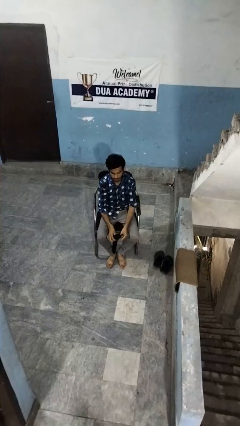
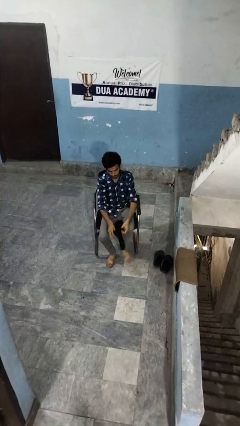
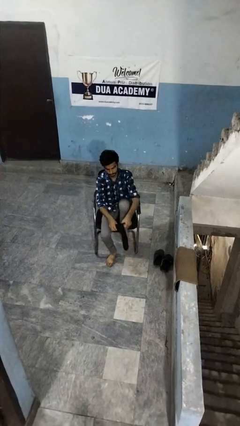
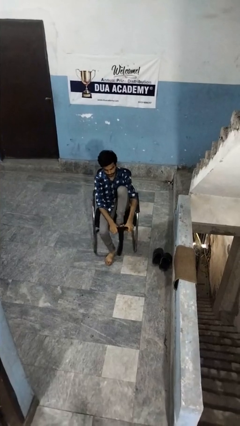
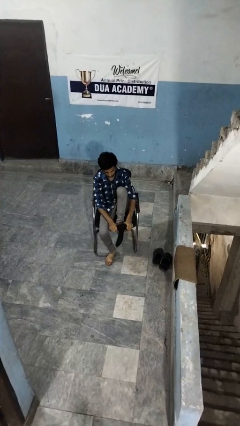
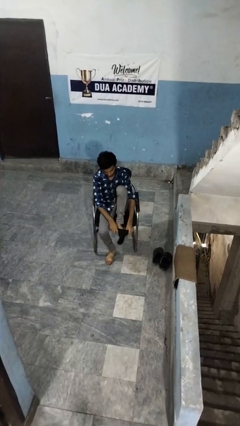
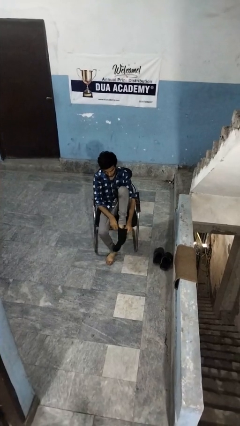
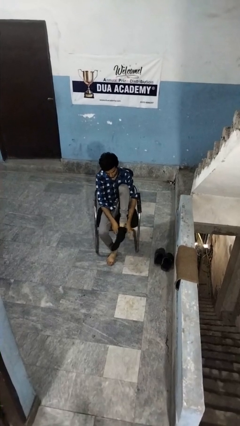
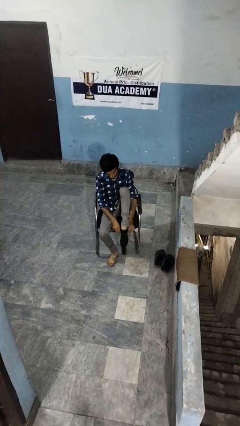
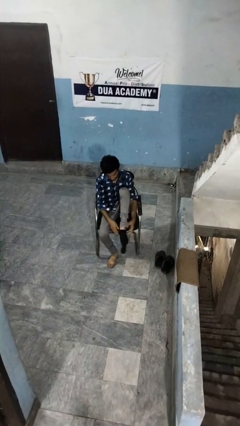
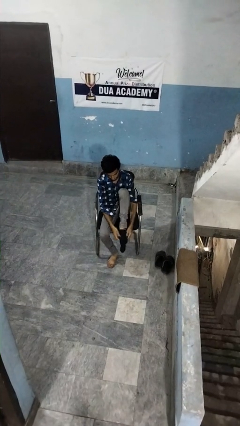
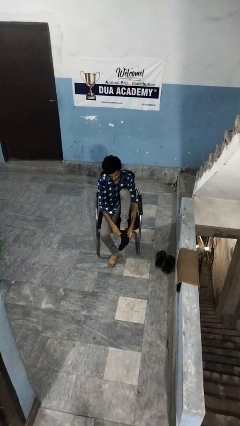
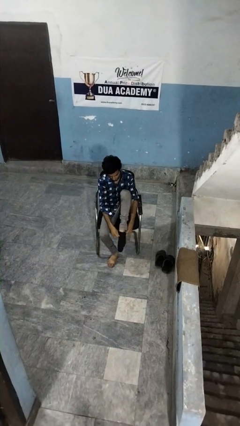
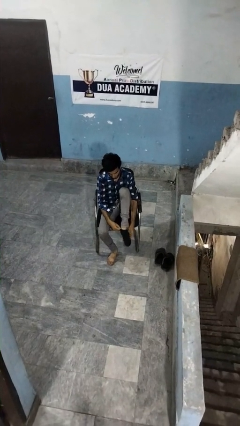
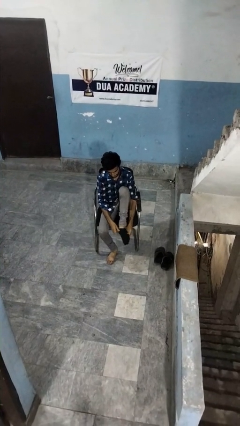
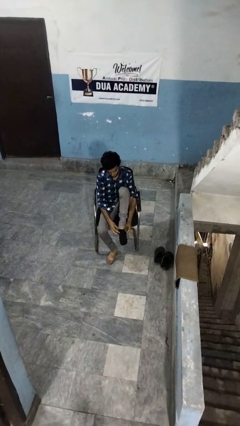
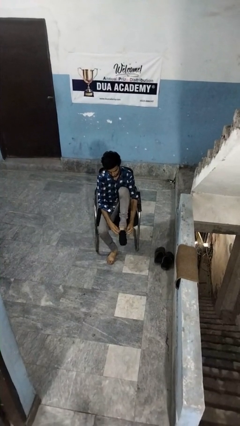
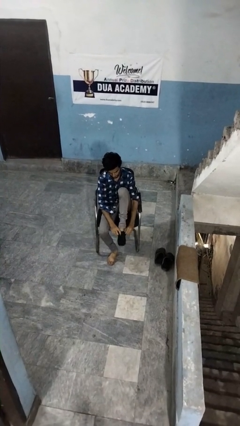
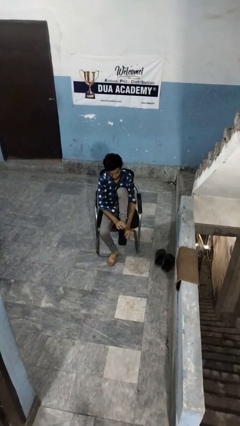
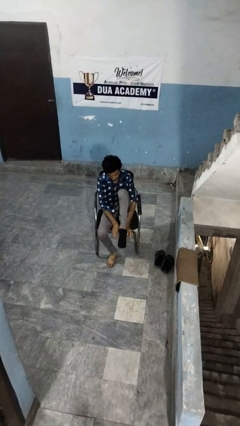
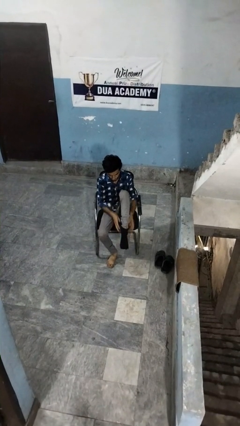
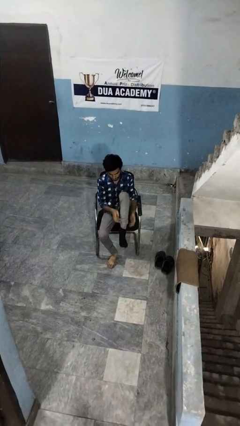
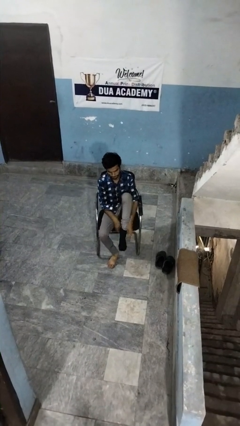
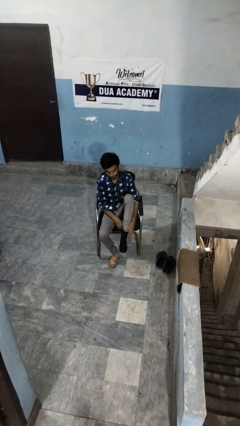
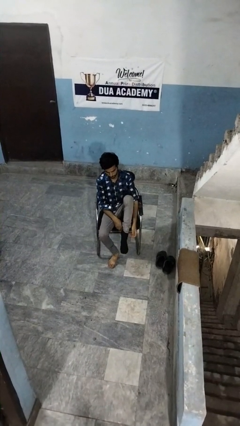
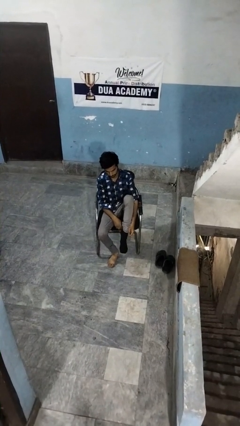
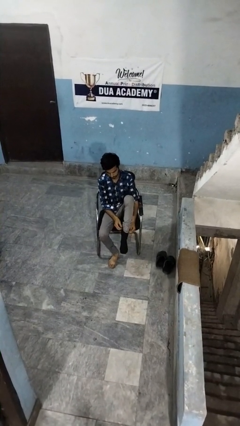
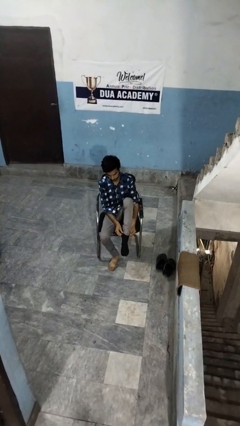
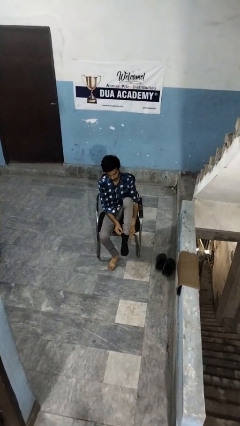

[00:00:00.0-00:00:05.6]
person puts on socks

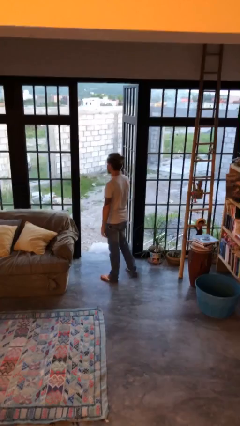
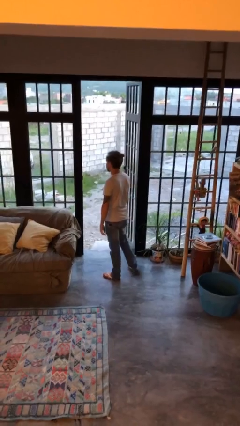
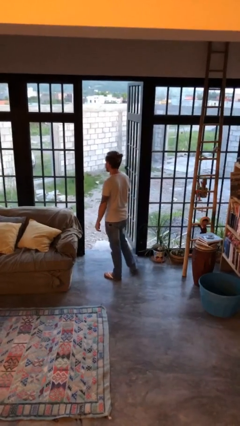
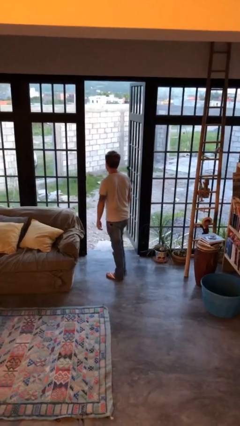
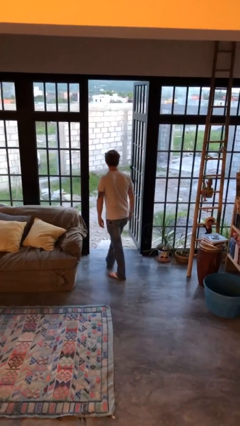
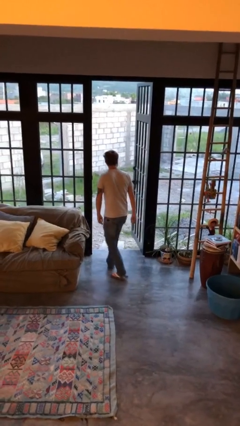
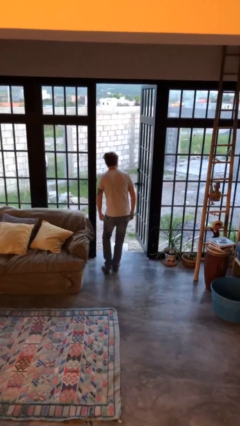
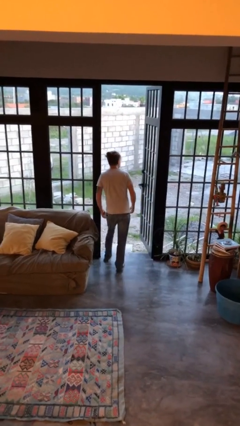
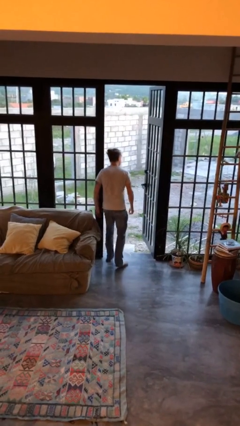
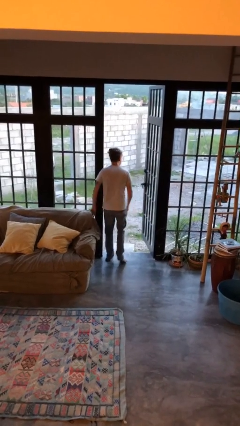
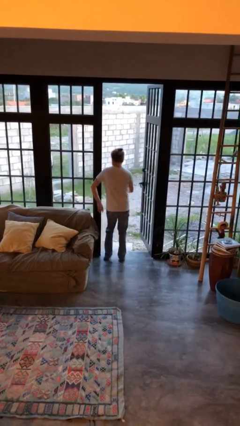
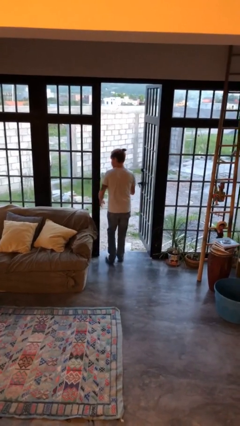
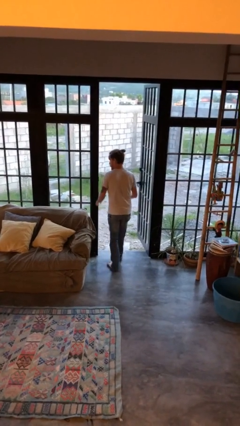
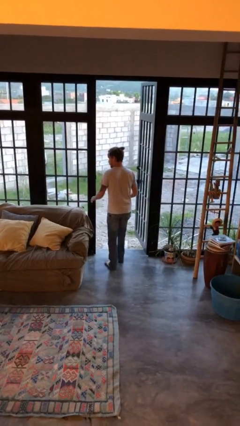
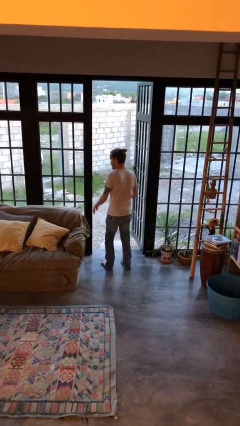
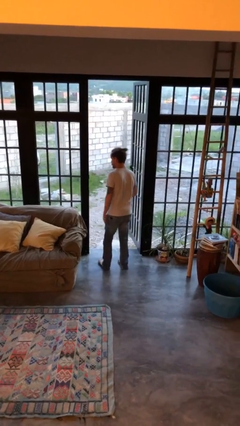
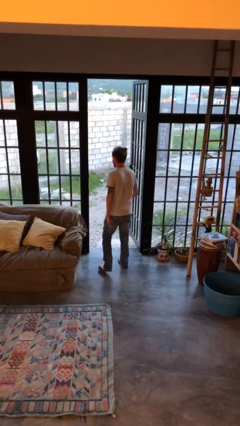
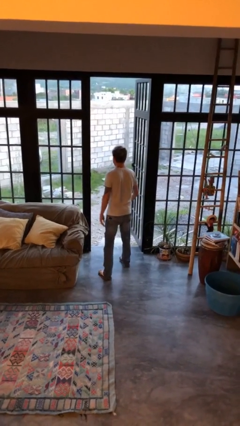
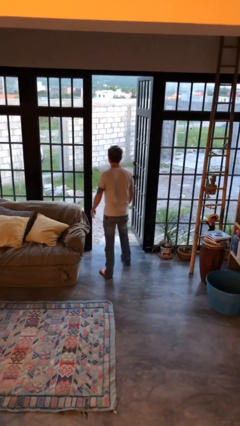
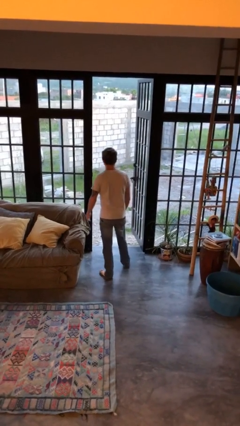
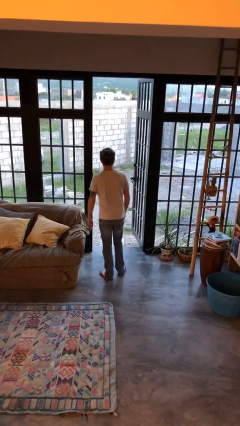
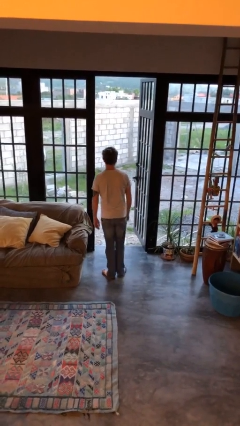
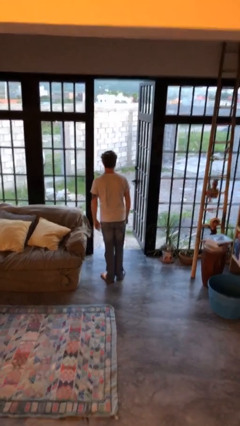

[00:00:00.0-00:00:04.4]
person bumps into wall

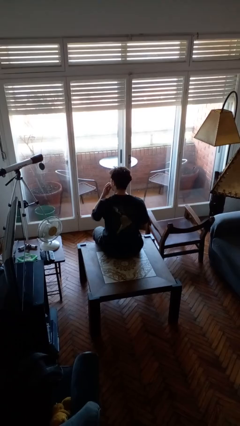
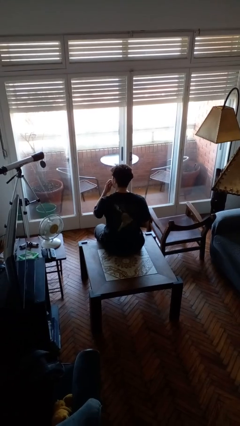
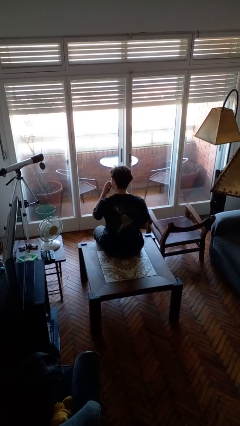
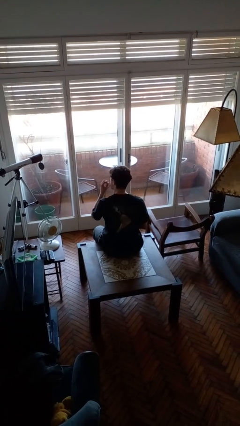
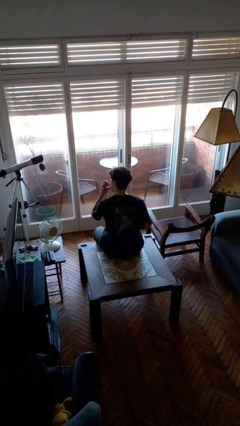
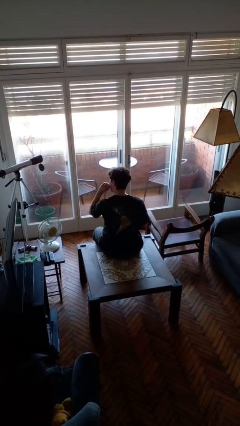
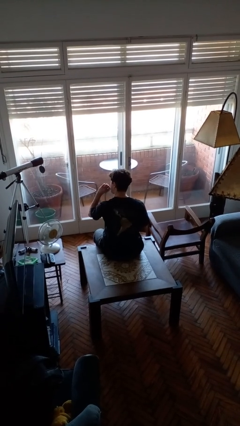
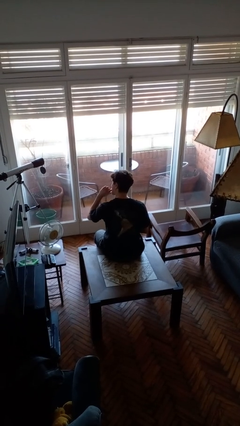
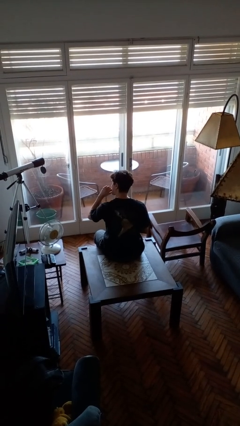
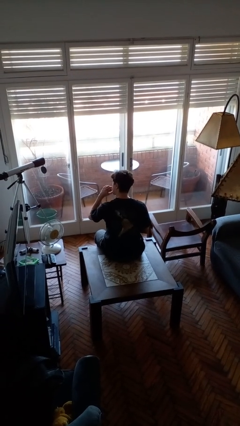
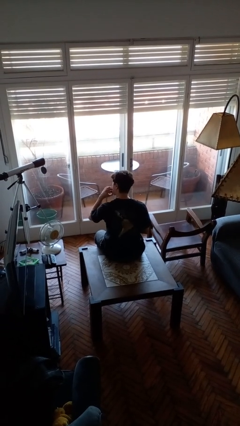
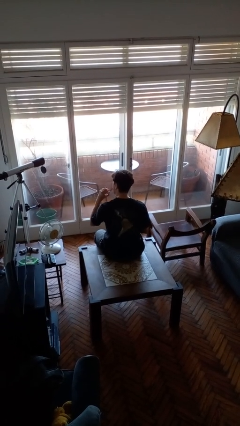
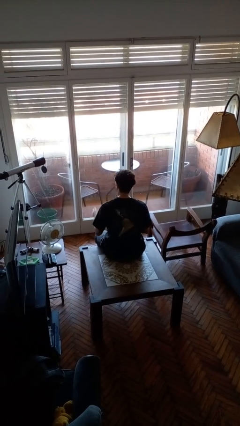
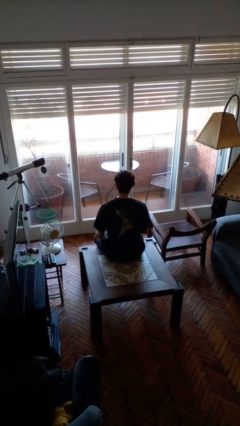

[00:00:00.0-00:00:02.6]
person licks fingers

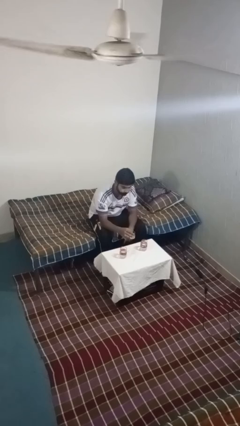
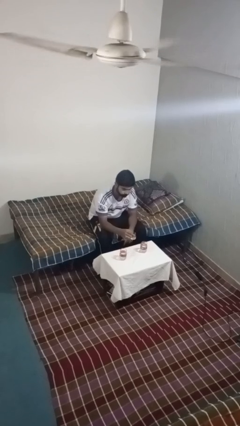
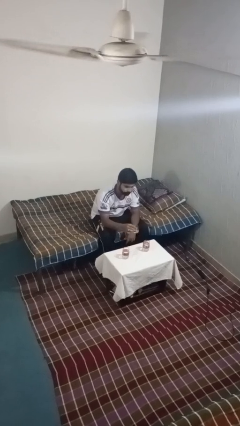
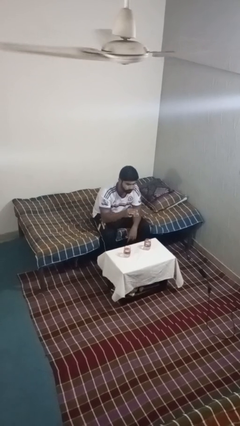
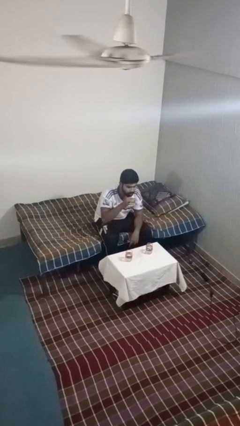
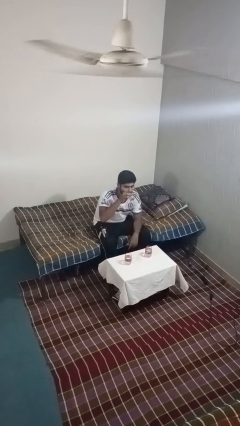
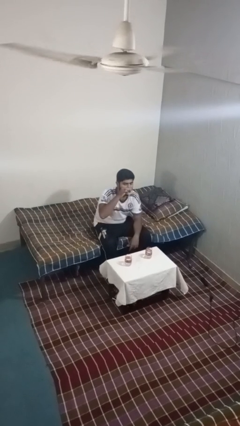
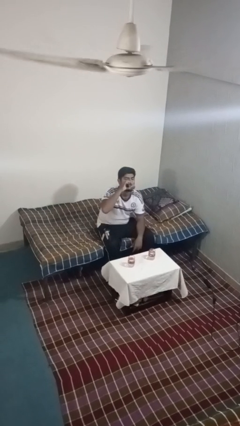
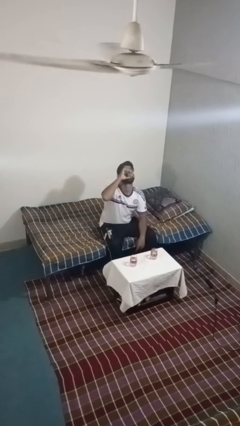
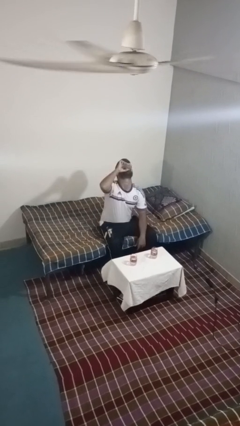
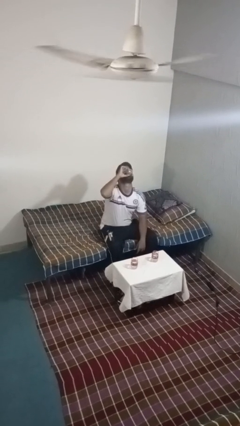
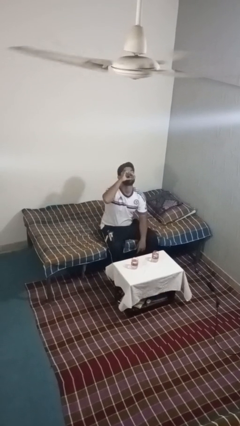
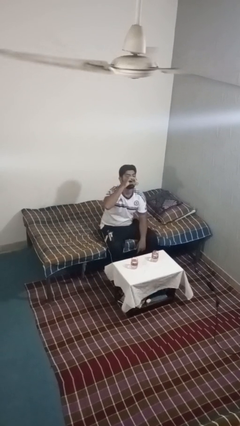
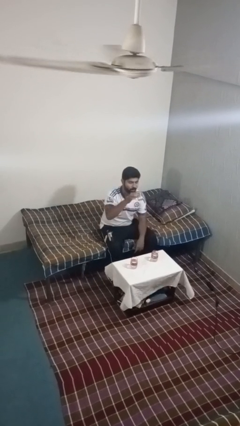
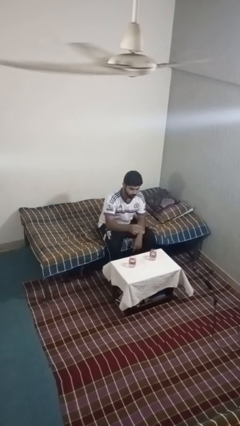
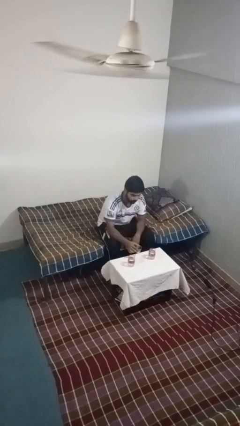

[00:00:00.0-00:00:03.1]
person drinks from shotglass

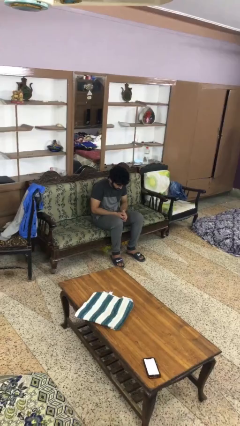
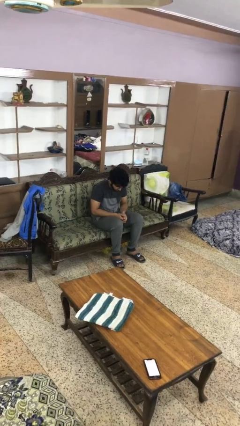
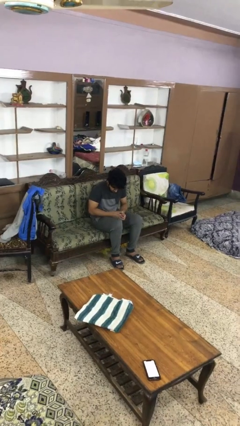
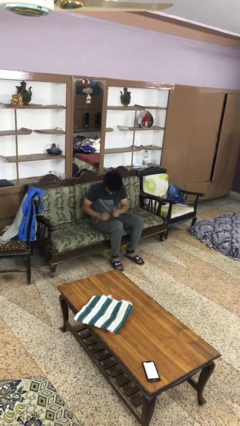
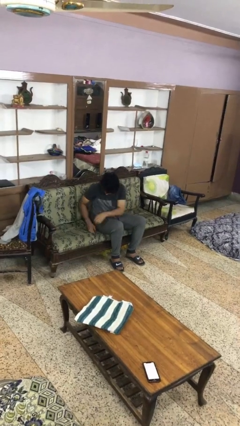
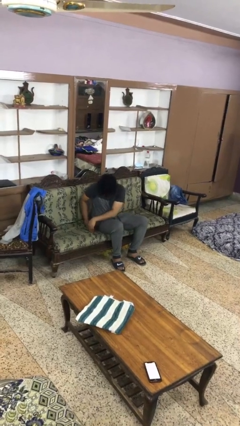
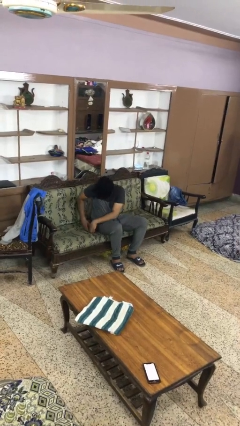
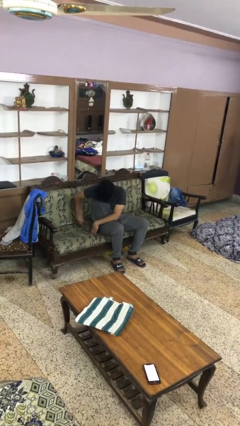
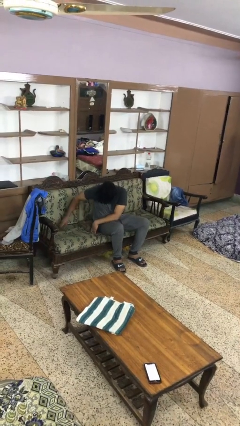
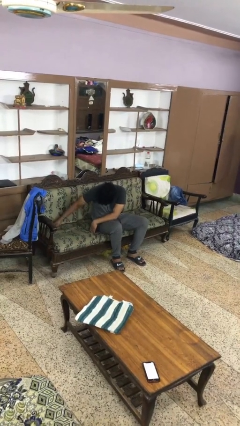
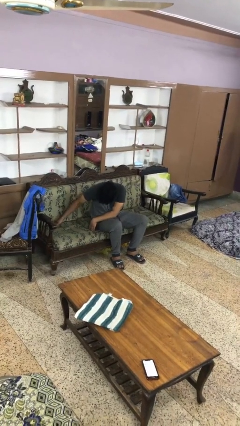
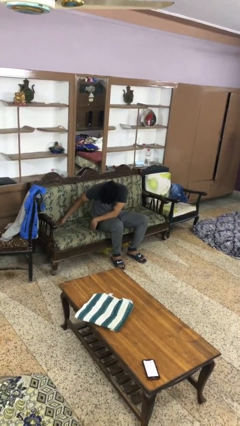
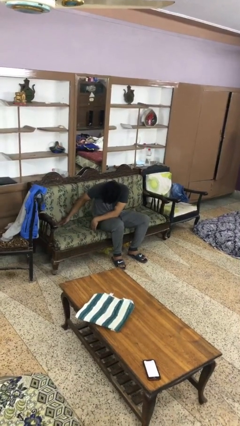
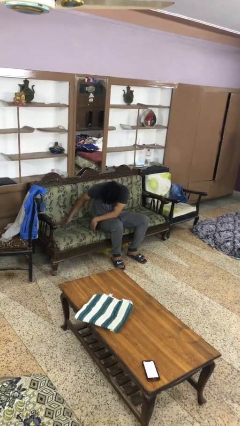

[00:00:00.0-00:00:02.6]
person searches in couch
